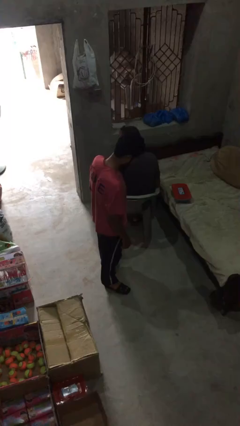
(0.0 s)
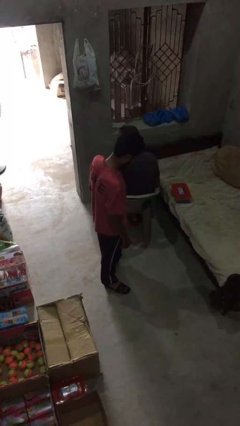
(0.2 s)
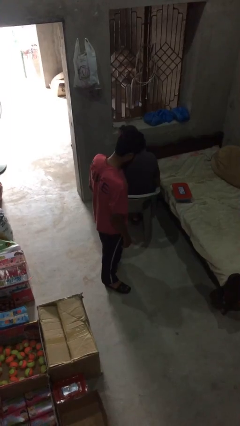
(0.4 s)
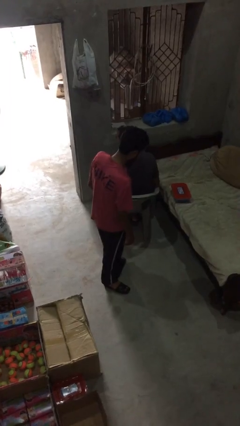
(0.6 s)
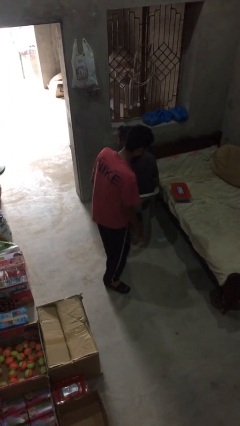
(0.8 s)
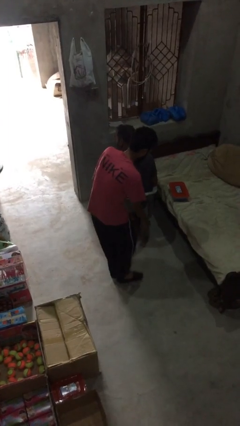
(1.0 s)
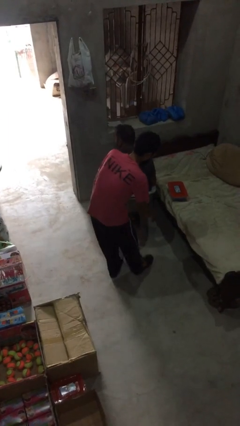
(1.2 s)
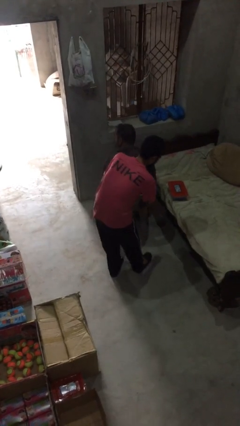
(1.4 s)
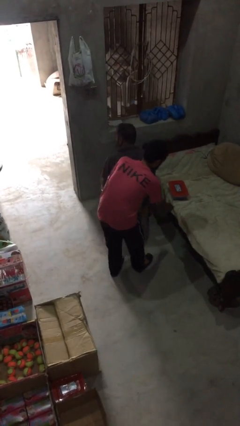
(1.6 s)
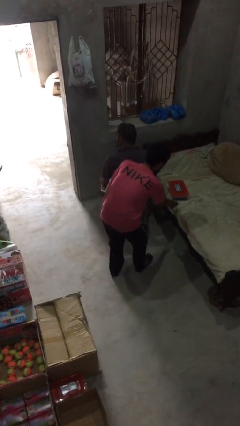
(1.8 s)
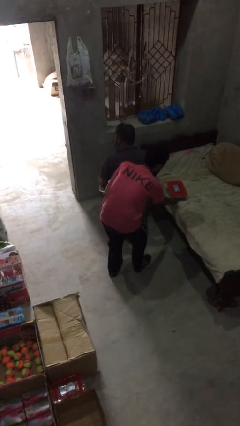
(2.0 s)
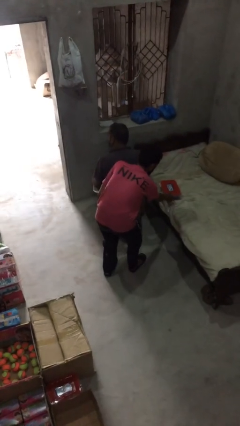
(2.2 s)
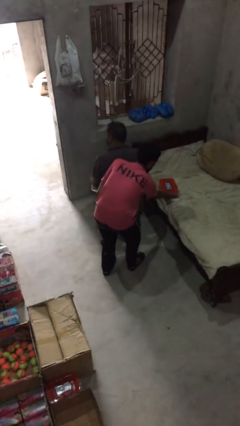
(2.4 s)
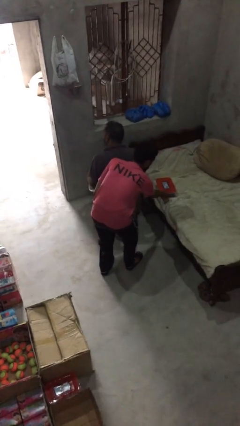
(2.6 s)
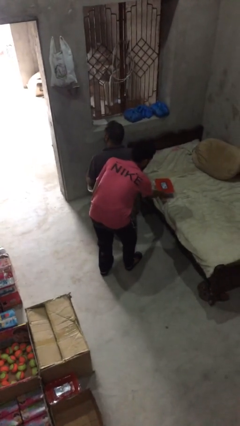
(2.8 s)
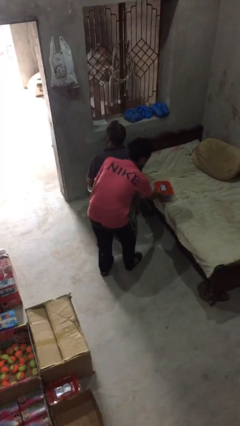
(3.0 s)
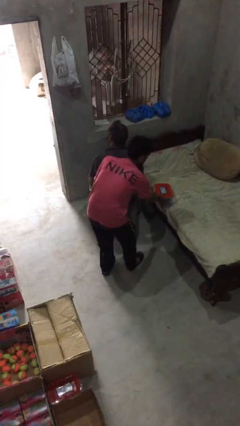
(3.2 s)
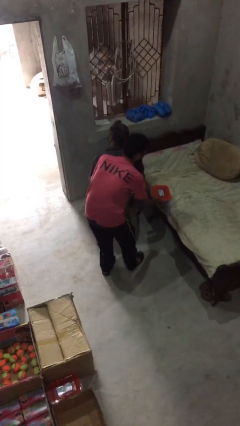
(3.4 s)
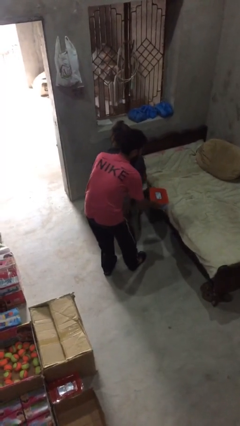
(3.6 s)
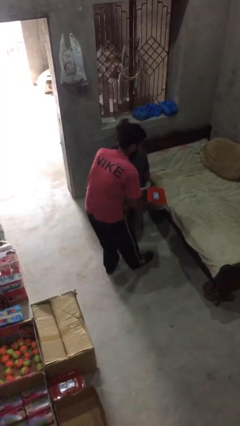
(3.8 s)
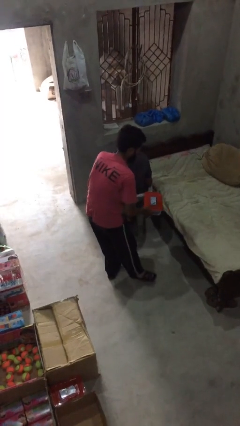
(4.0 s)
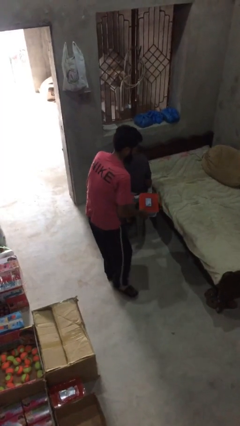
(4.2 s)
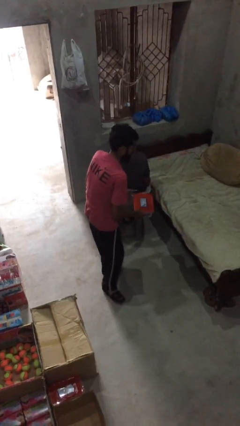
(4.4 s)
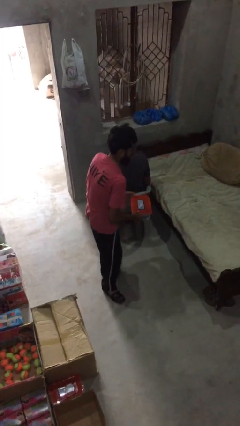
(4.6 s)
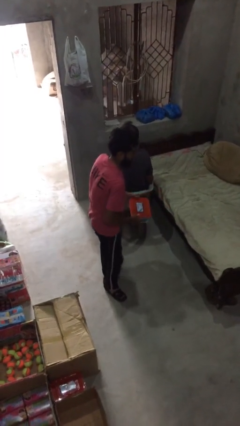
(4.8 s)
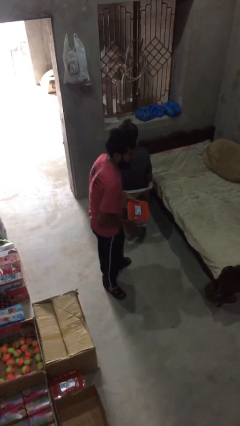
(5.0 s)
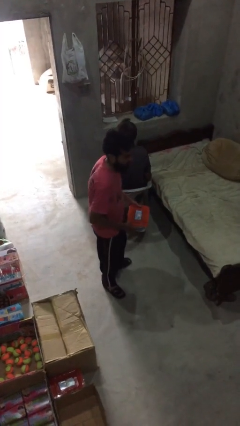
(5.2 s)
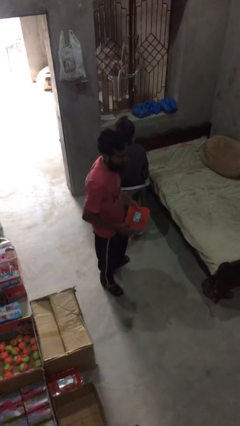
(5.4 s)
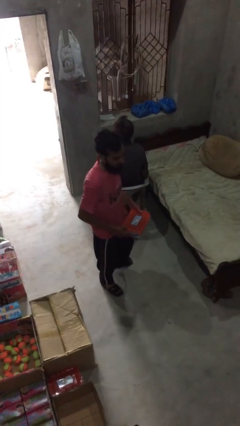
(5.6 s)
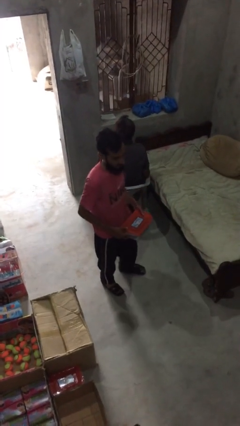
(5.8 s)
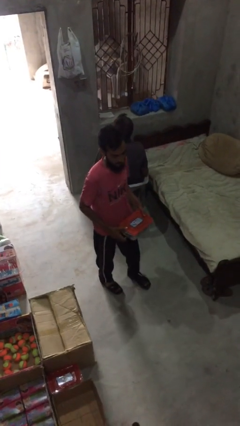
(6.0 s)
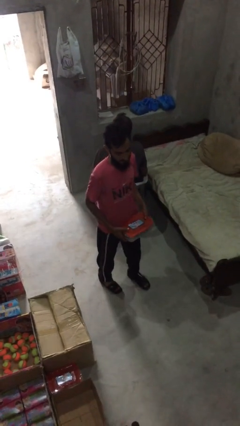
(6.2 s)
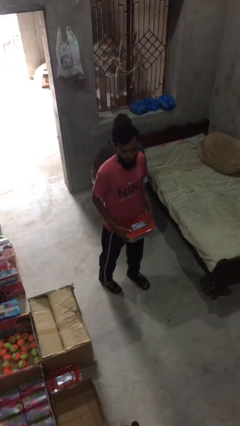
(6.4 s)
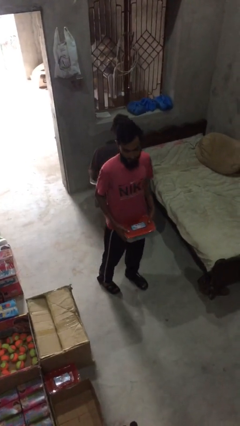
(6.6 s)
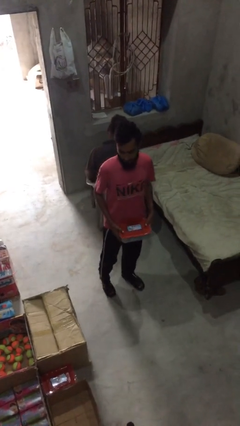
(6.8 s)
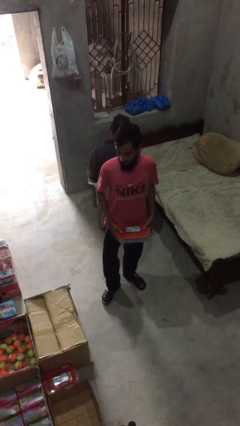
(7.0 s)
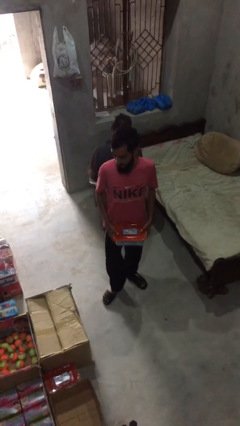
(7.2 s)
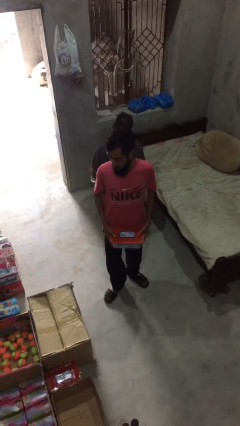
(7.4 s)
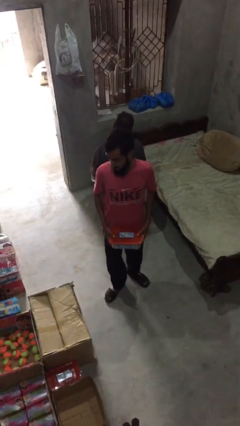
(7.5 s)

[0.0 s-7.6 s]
person steals object from person

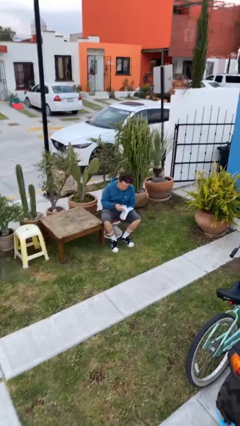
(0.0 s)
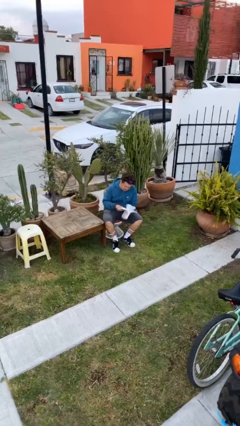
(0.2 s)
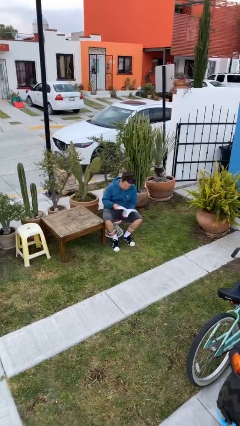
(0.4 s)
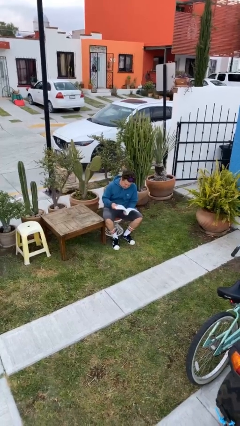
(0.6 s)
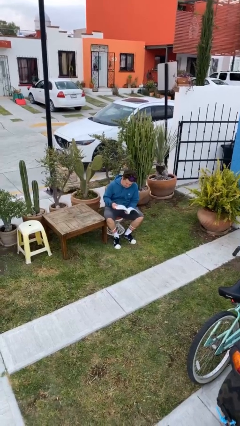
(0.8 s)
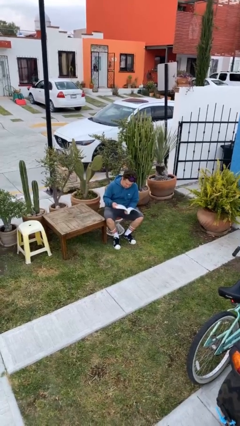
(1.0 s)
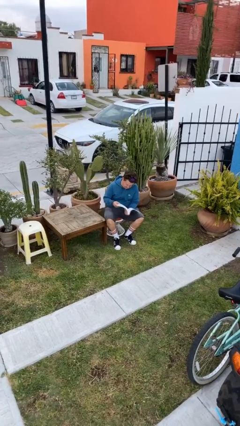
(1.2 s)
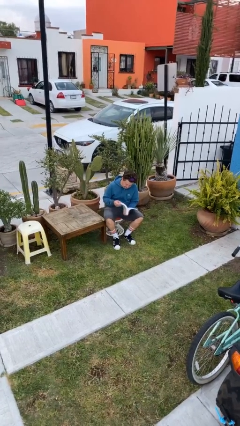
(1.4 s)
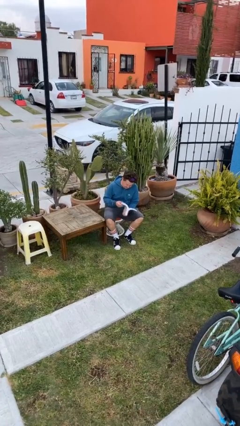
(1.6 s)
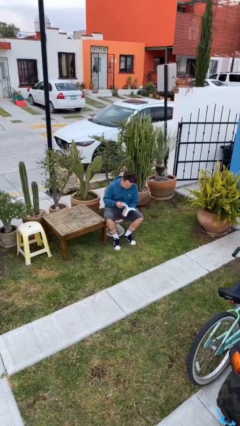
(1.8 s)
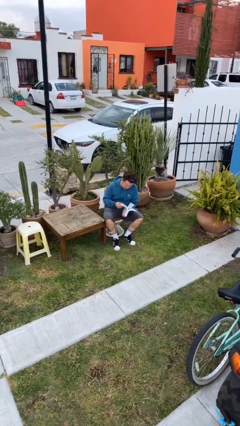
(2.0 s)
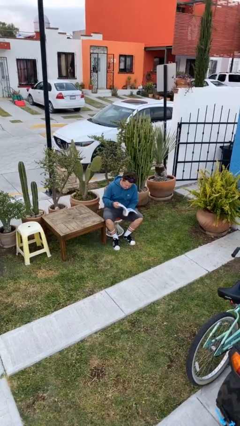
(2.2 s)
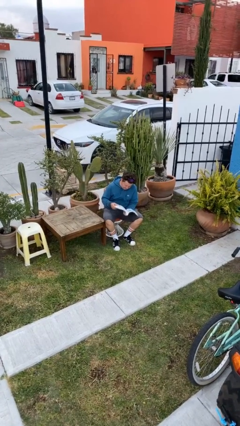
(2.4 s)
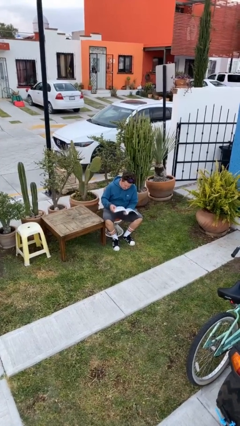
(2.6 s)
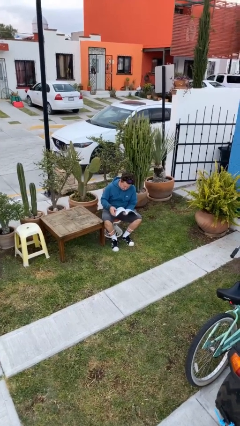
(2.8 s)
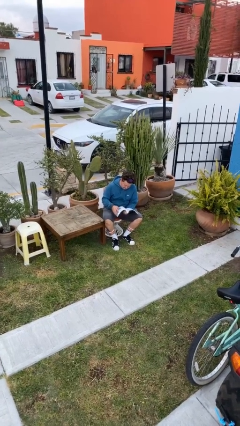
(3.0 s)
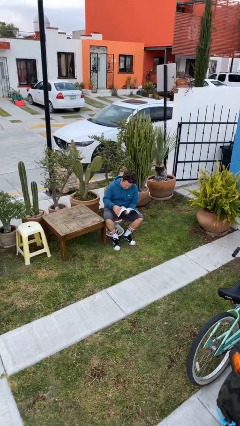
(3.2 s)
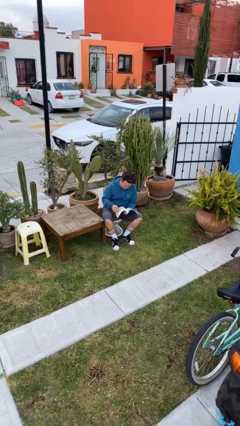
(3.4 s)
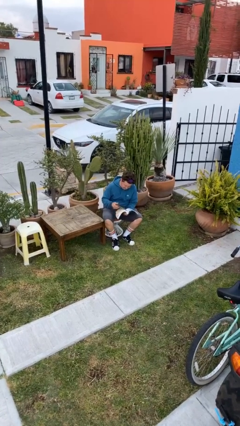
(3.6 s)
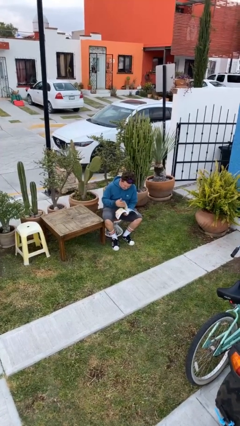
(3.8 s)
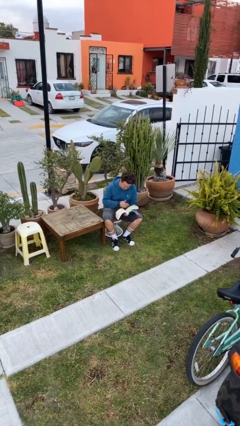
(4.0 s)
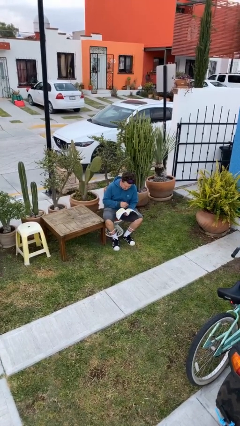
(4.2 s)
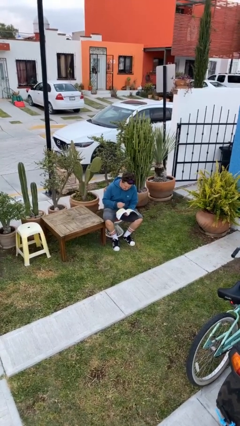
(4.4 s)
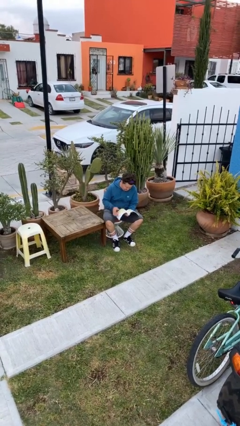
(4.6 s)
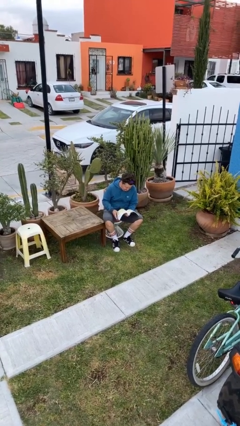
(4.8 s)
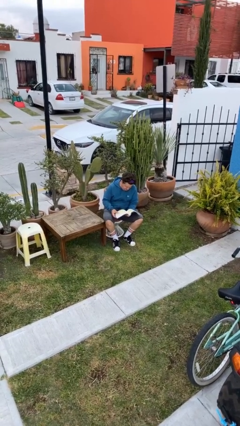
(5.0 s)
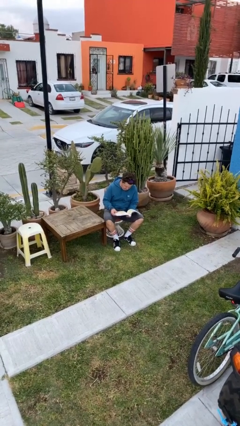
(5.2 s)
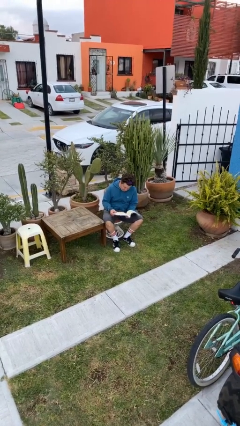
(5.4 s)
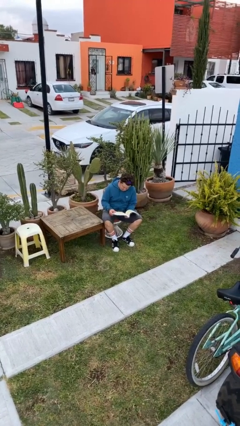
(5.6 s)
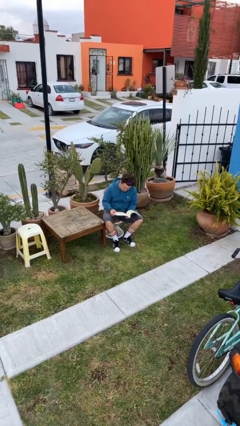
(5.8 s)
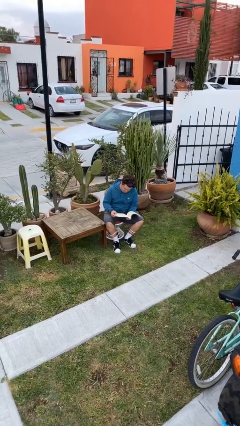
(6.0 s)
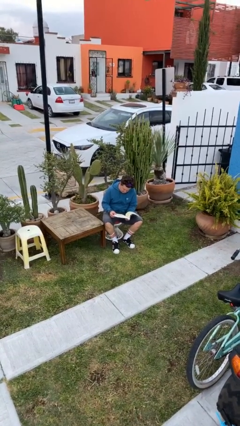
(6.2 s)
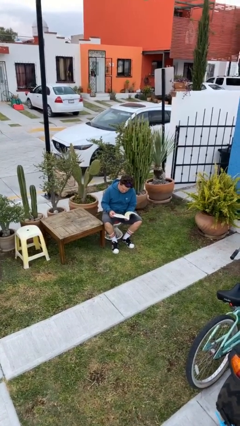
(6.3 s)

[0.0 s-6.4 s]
person reads document

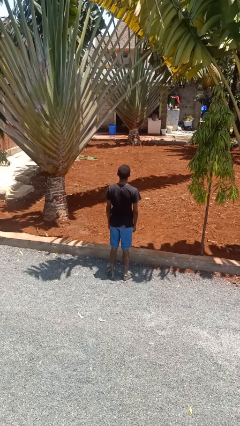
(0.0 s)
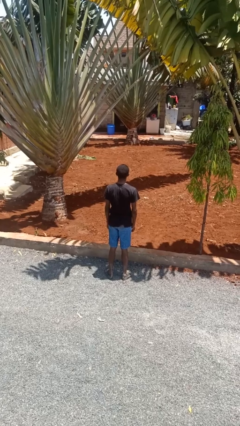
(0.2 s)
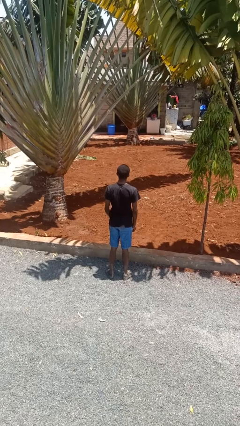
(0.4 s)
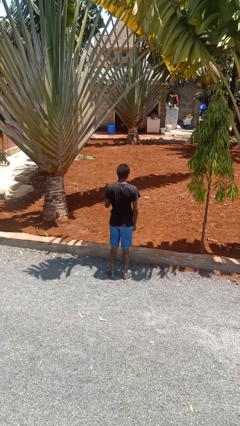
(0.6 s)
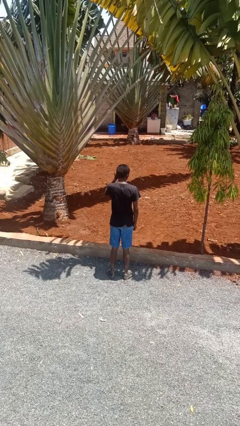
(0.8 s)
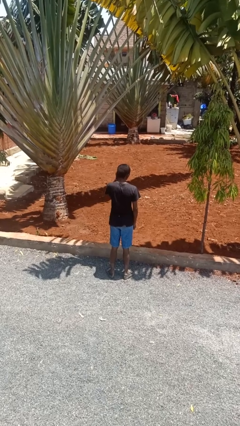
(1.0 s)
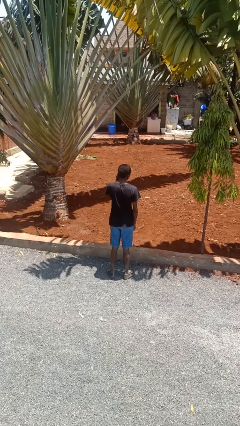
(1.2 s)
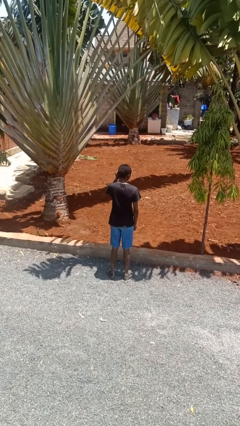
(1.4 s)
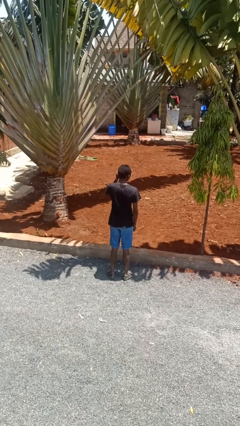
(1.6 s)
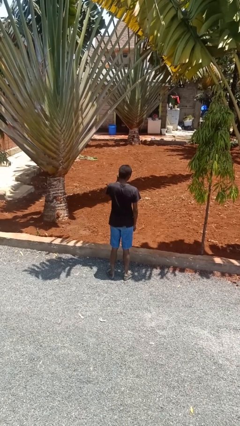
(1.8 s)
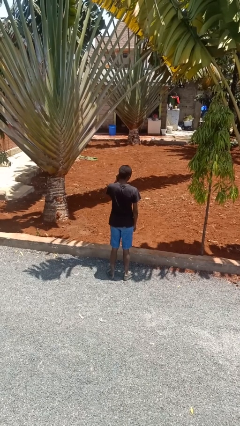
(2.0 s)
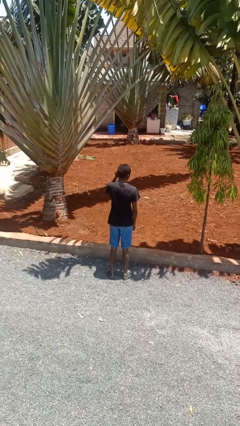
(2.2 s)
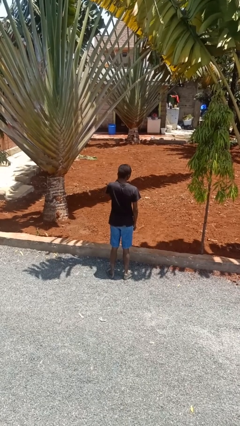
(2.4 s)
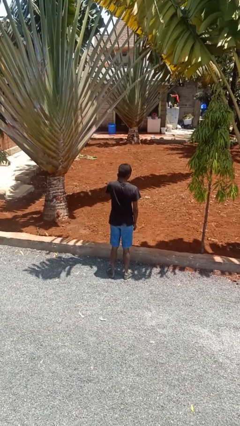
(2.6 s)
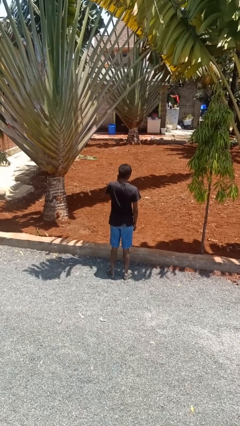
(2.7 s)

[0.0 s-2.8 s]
person touches earlobe

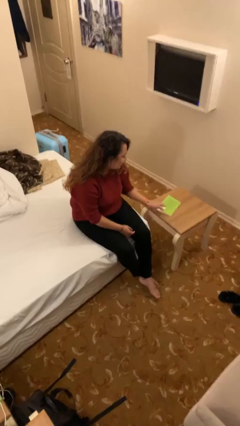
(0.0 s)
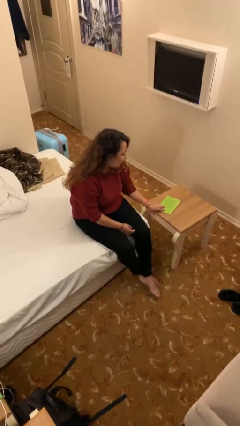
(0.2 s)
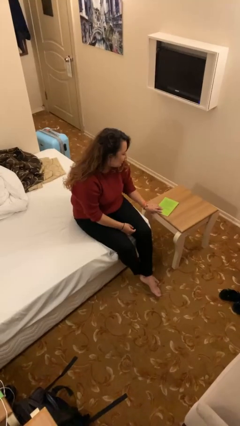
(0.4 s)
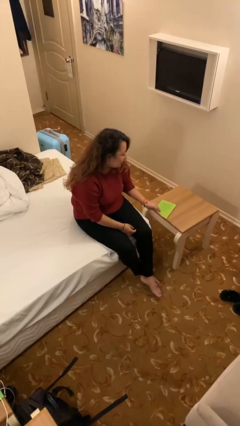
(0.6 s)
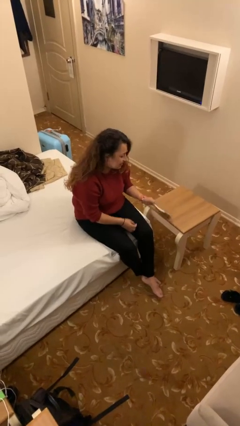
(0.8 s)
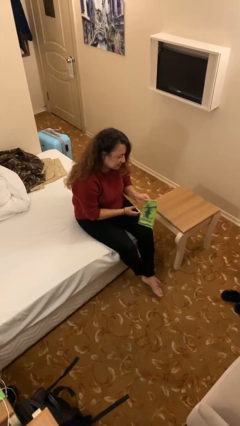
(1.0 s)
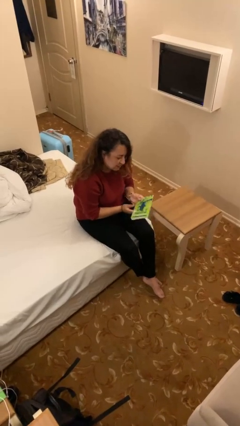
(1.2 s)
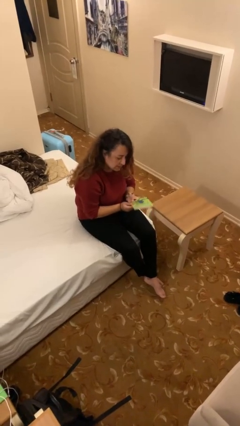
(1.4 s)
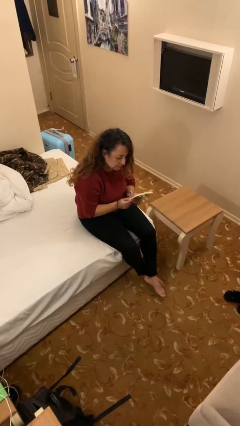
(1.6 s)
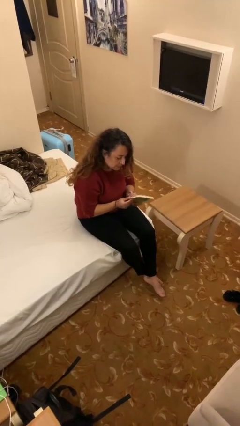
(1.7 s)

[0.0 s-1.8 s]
person picks up object from table
